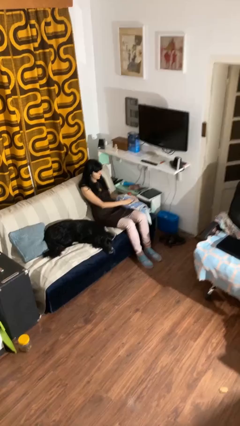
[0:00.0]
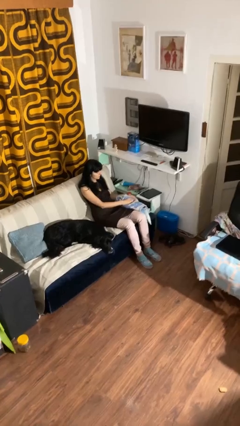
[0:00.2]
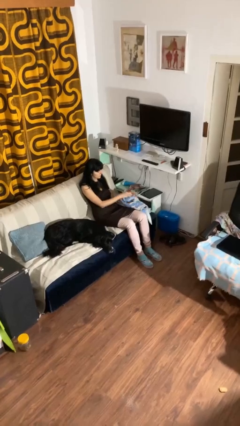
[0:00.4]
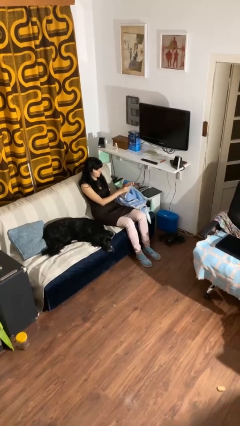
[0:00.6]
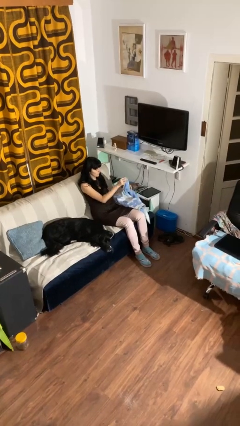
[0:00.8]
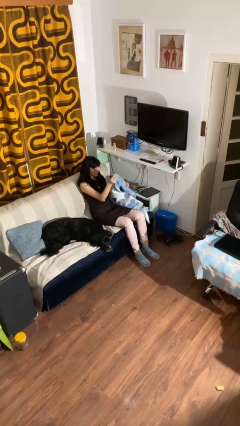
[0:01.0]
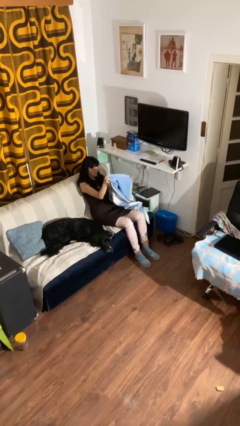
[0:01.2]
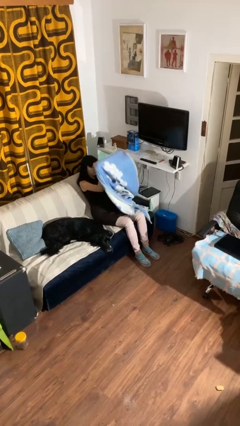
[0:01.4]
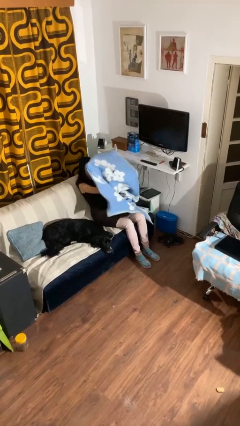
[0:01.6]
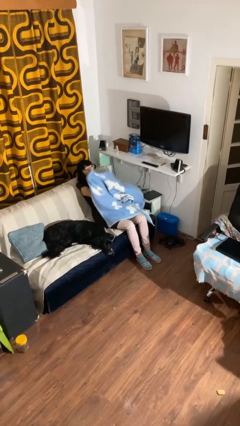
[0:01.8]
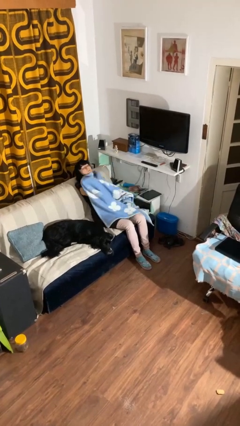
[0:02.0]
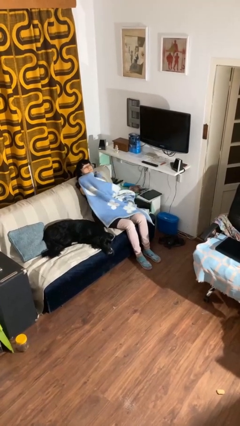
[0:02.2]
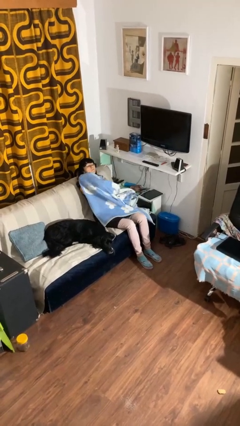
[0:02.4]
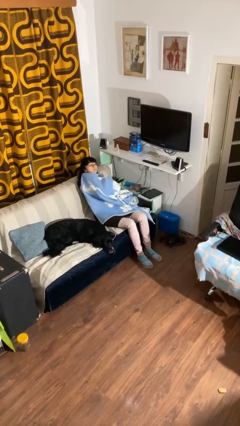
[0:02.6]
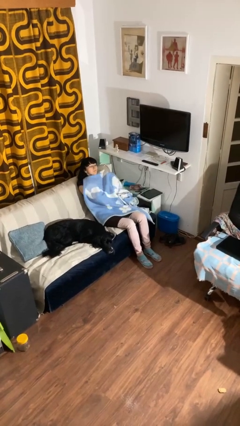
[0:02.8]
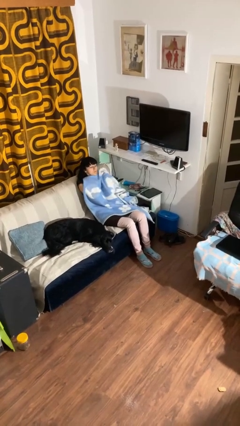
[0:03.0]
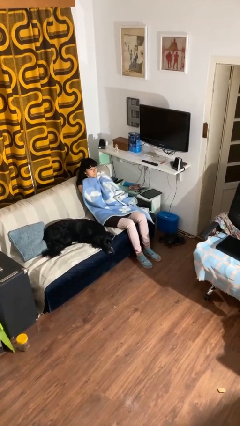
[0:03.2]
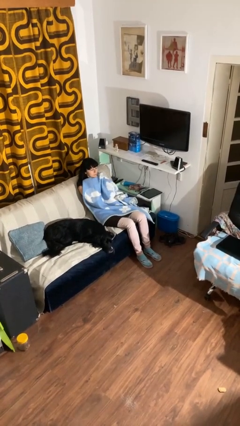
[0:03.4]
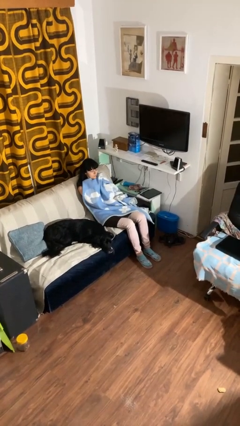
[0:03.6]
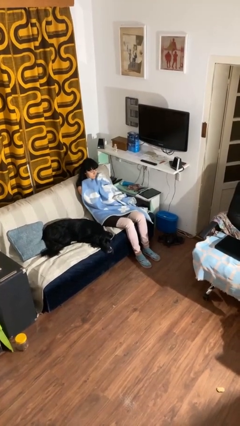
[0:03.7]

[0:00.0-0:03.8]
person covers with blanket

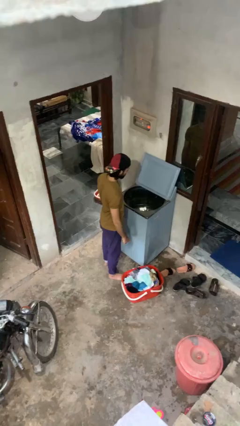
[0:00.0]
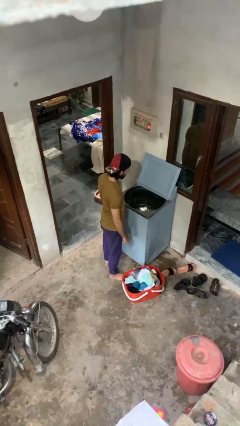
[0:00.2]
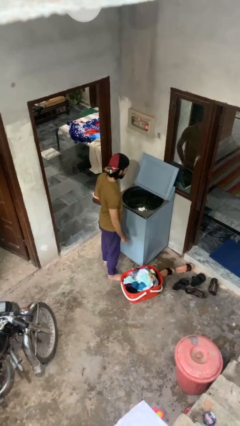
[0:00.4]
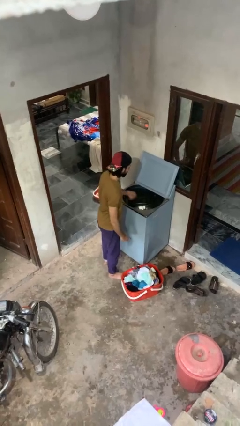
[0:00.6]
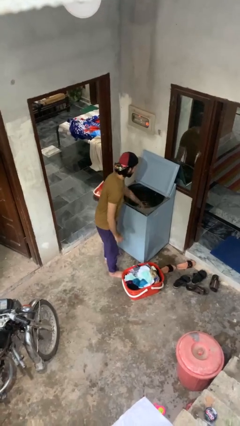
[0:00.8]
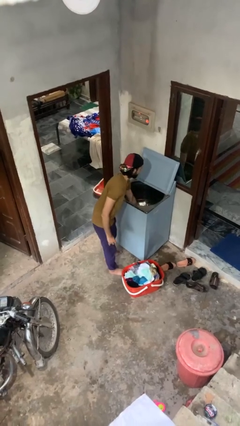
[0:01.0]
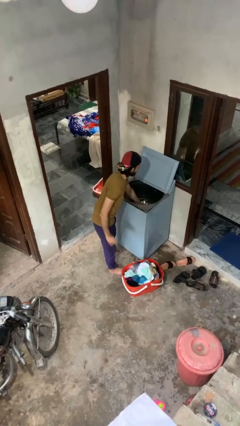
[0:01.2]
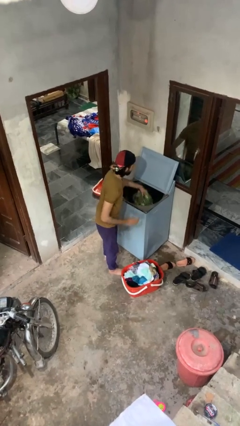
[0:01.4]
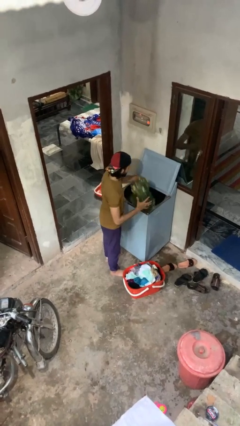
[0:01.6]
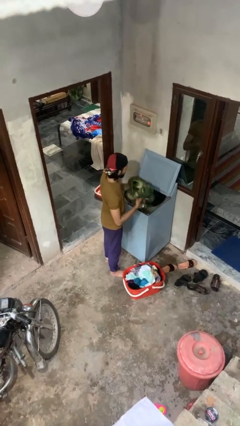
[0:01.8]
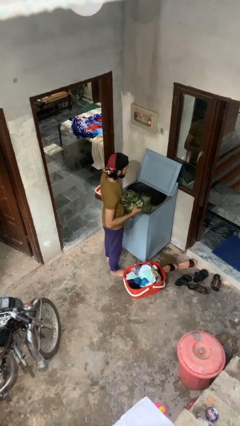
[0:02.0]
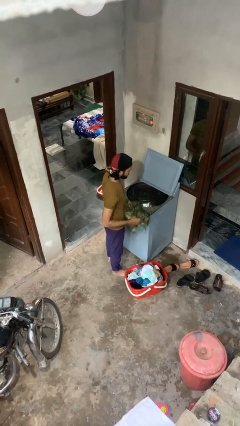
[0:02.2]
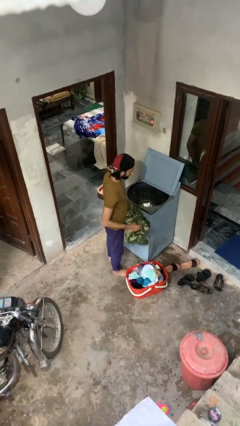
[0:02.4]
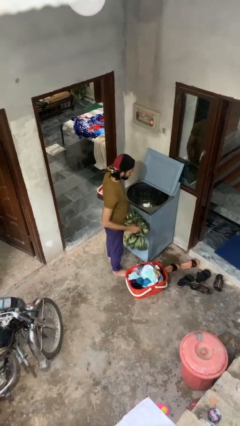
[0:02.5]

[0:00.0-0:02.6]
person unloads clotheswasher

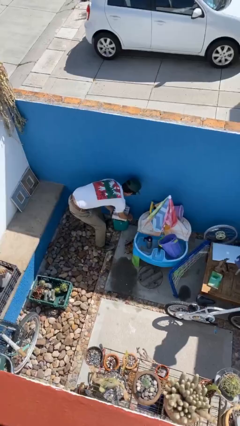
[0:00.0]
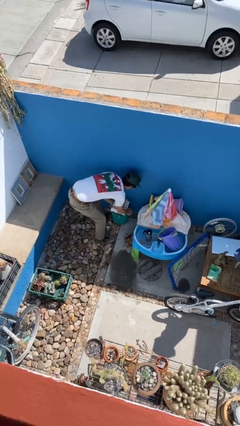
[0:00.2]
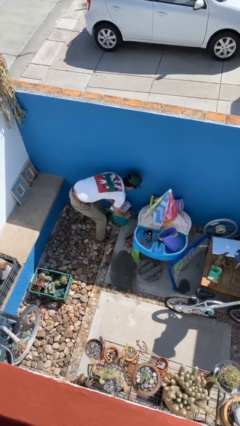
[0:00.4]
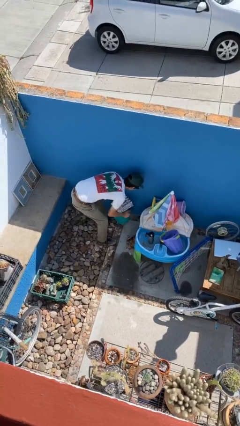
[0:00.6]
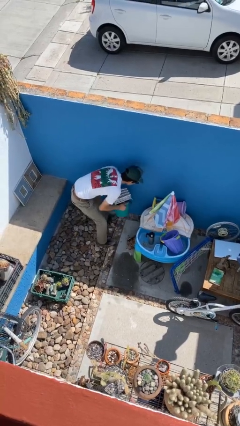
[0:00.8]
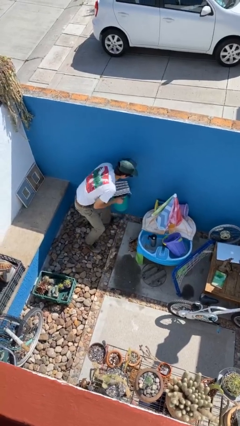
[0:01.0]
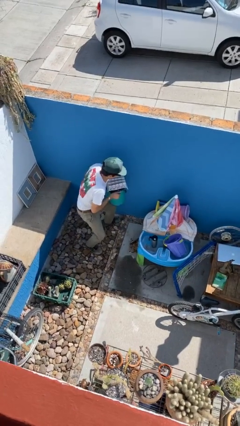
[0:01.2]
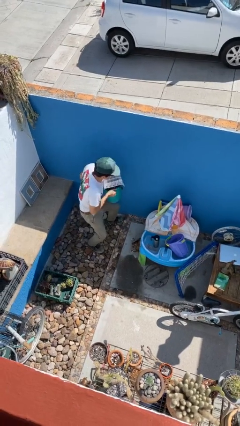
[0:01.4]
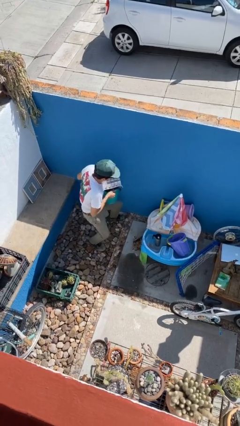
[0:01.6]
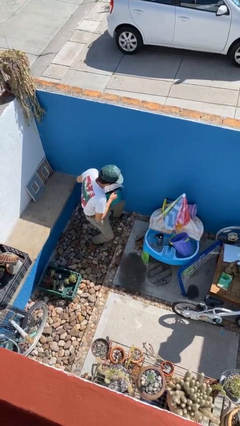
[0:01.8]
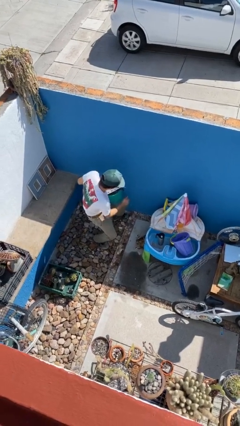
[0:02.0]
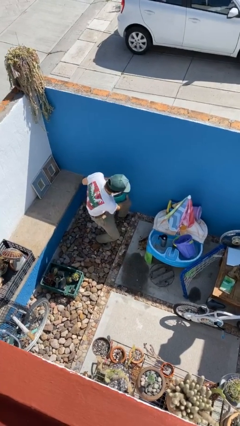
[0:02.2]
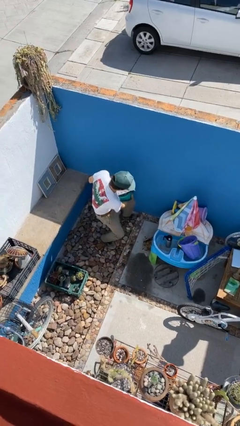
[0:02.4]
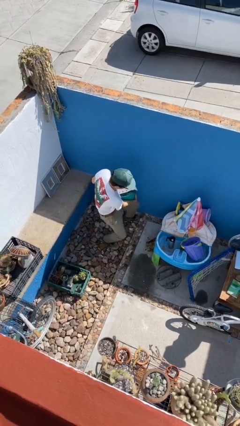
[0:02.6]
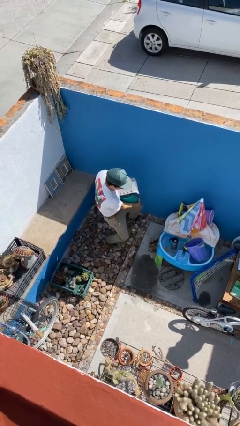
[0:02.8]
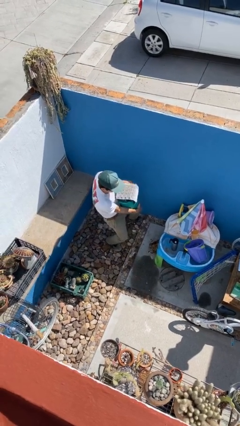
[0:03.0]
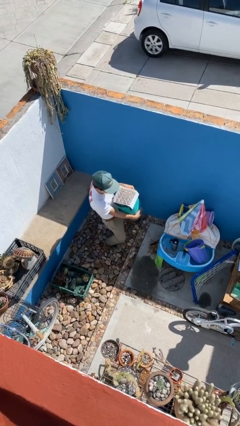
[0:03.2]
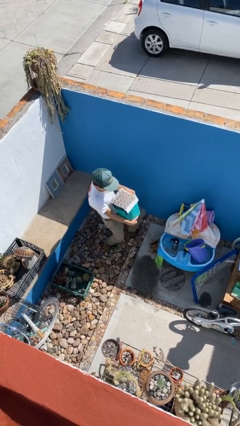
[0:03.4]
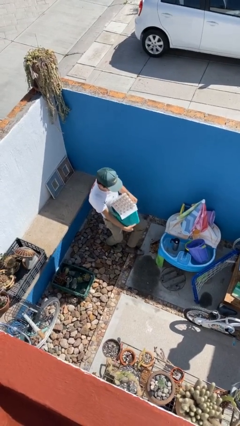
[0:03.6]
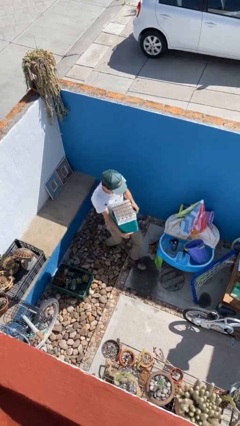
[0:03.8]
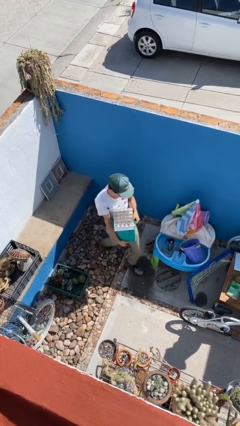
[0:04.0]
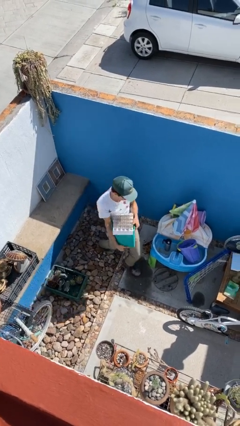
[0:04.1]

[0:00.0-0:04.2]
person picks up object from floor

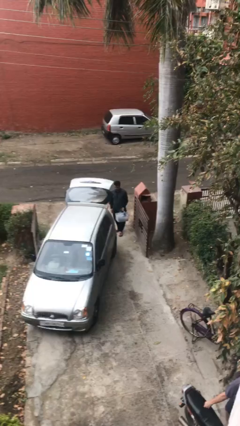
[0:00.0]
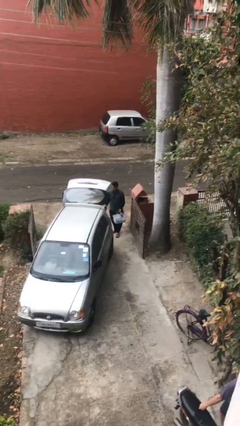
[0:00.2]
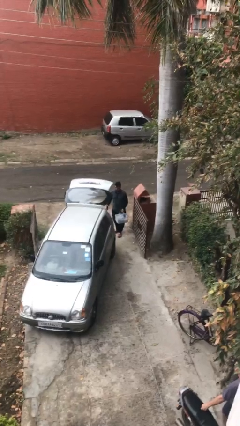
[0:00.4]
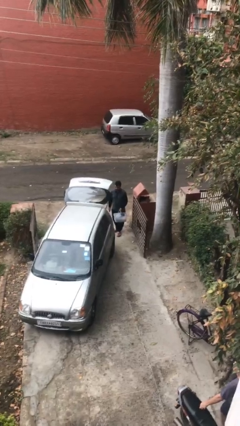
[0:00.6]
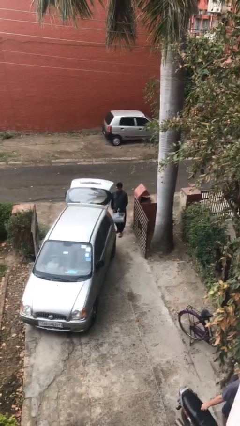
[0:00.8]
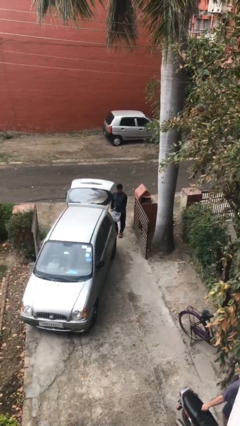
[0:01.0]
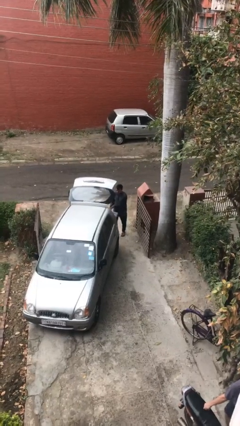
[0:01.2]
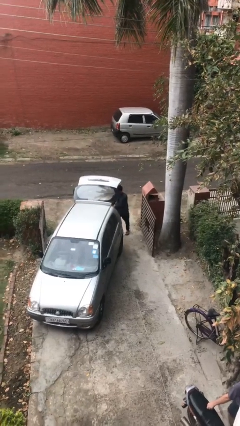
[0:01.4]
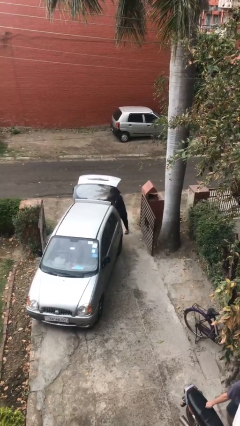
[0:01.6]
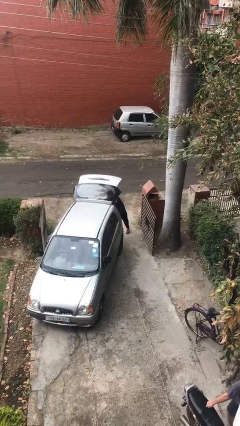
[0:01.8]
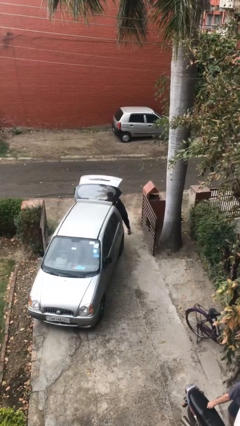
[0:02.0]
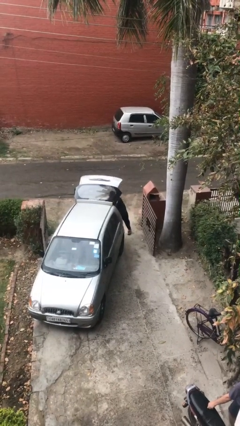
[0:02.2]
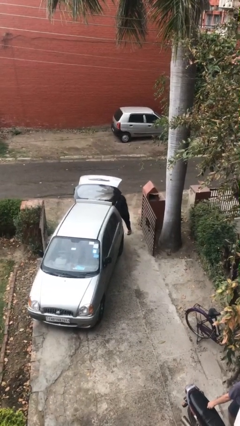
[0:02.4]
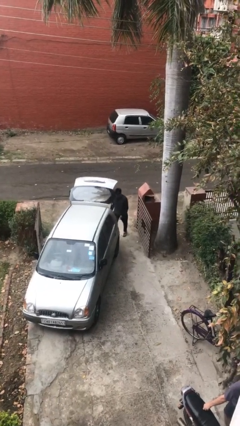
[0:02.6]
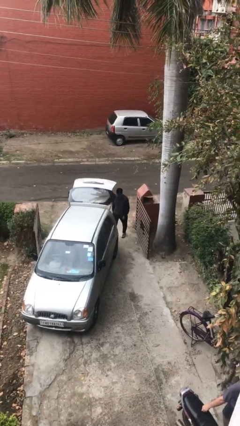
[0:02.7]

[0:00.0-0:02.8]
person loads car

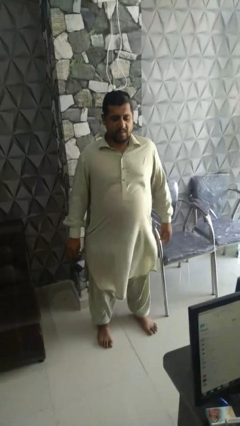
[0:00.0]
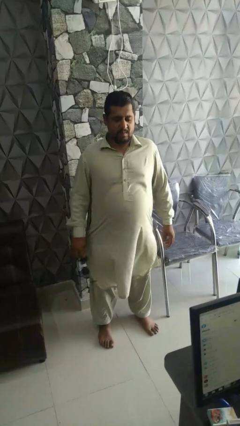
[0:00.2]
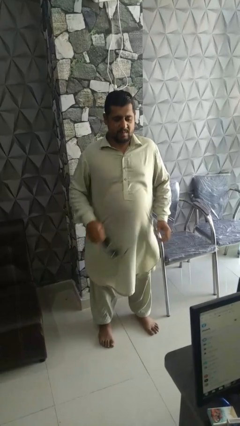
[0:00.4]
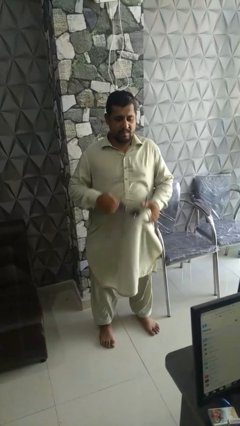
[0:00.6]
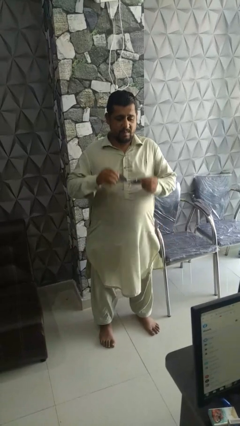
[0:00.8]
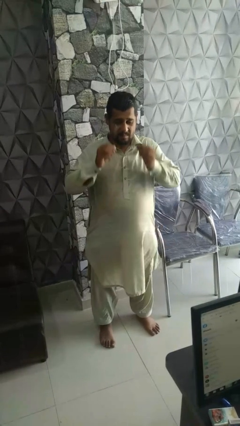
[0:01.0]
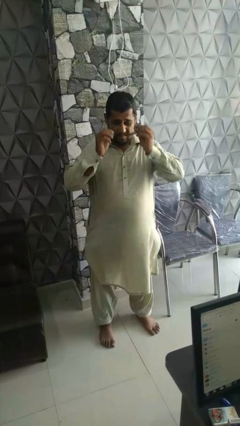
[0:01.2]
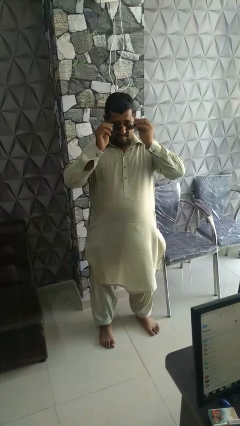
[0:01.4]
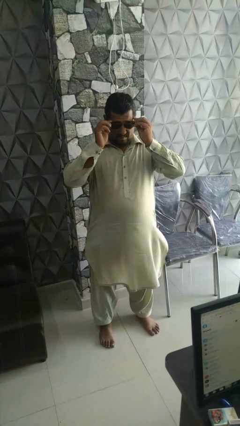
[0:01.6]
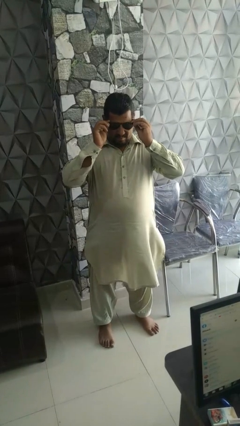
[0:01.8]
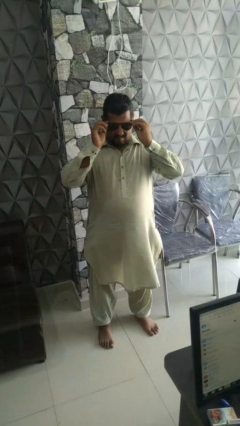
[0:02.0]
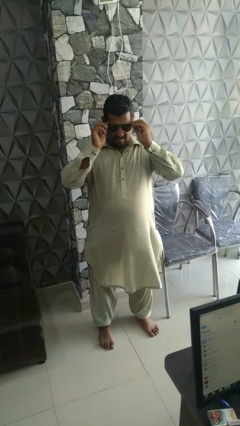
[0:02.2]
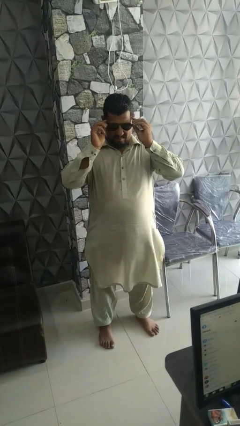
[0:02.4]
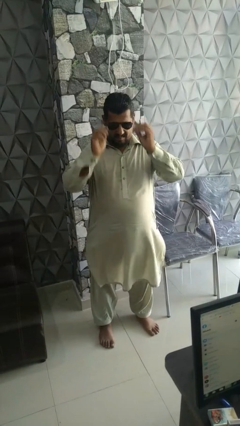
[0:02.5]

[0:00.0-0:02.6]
person puts on sunglasses

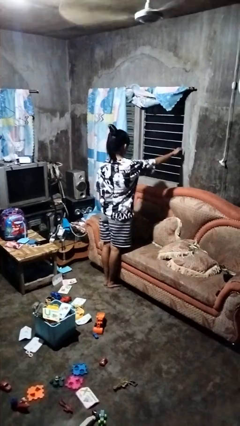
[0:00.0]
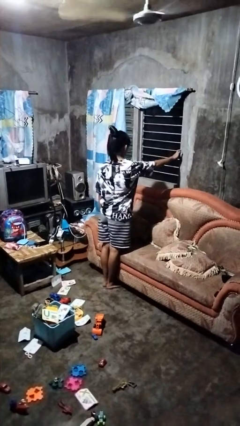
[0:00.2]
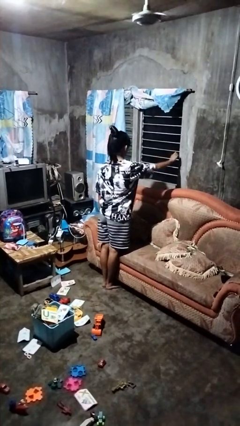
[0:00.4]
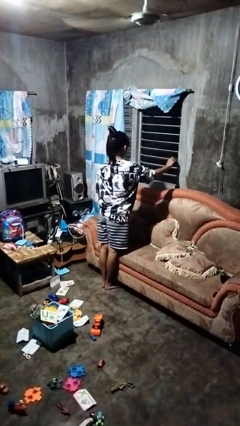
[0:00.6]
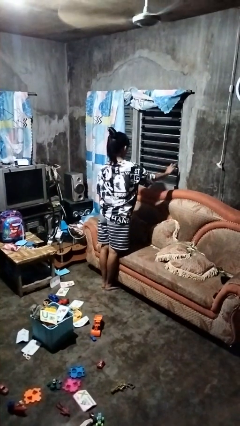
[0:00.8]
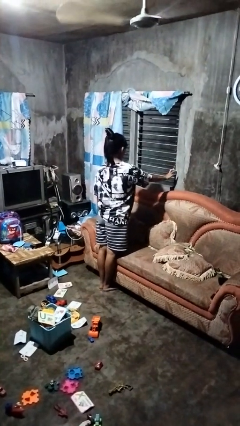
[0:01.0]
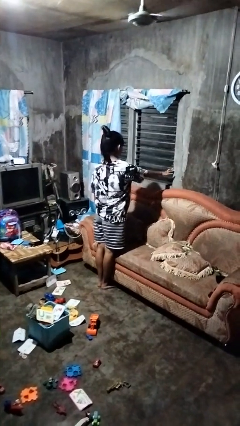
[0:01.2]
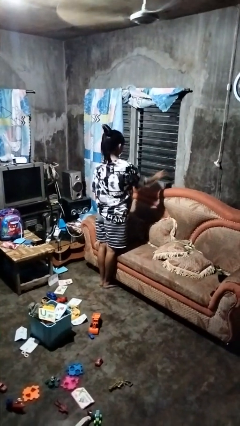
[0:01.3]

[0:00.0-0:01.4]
person opens home window
